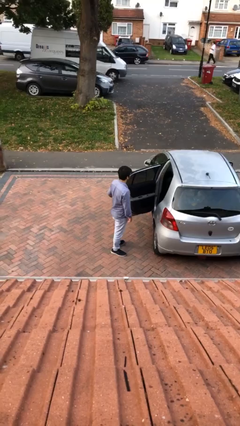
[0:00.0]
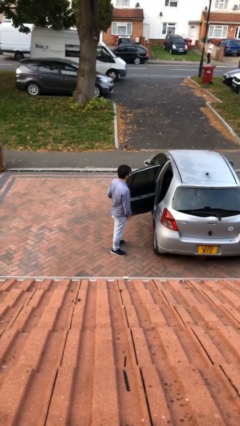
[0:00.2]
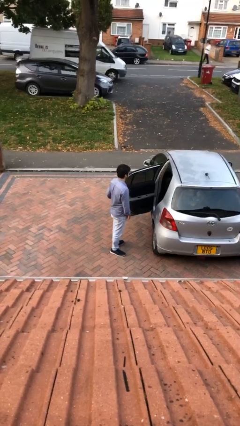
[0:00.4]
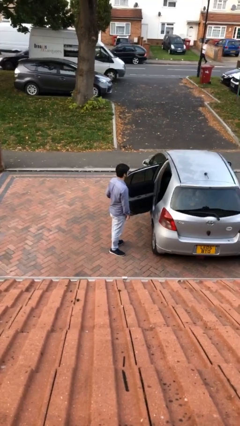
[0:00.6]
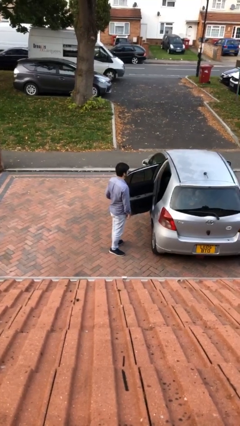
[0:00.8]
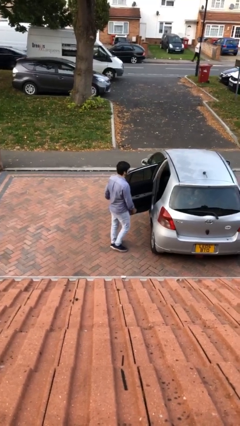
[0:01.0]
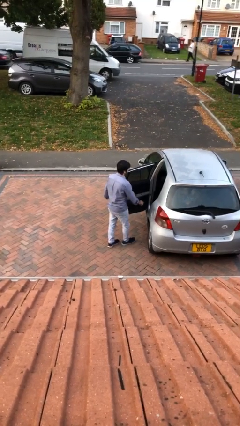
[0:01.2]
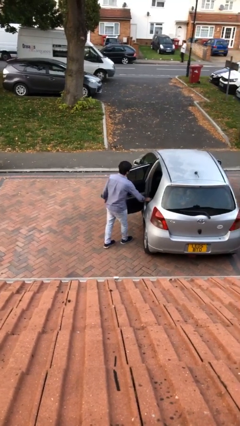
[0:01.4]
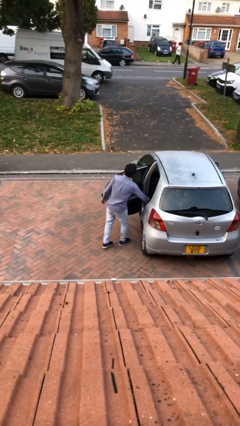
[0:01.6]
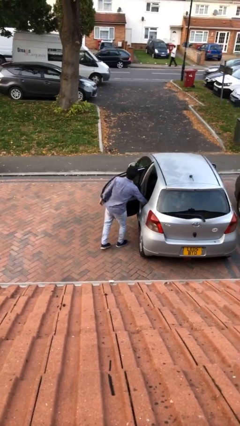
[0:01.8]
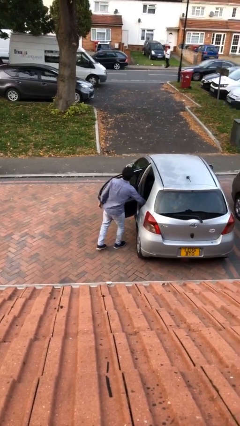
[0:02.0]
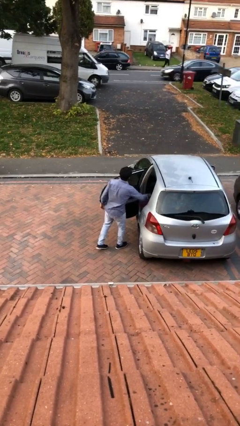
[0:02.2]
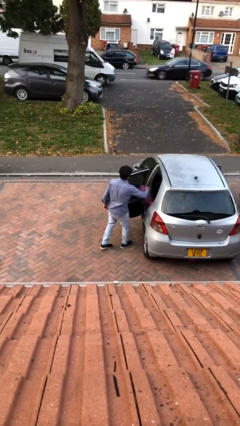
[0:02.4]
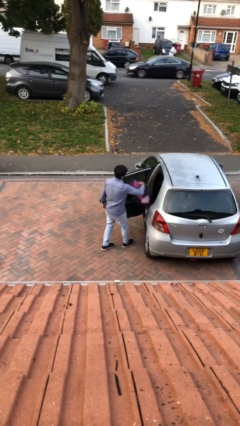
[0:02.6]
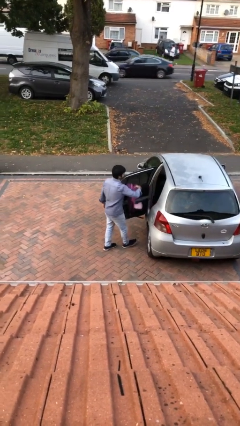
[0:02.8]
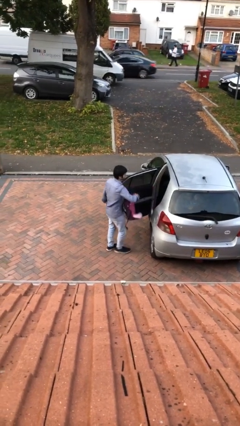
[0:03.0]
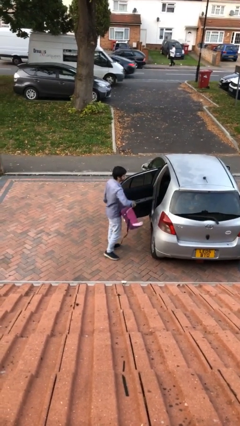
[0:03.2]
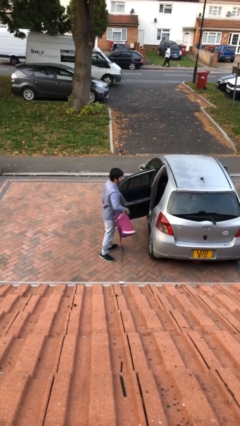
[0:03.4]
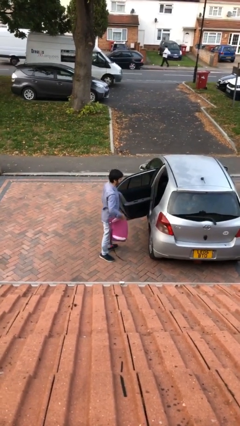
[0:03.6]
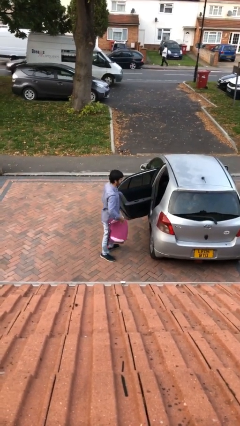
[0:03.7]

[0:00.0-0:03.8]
person unloads car

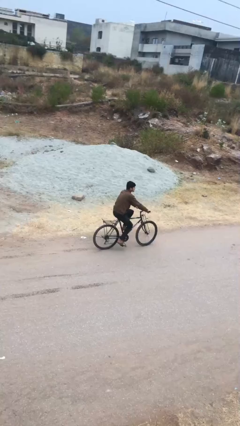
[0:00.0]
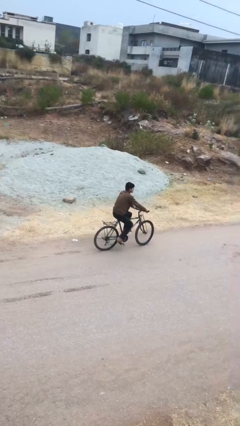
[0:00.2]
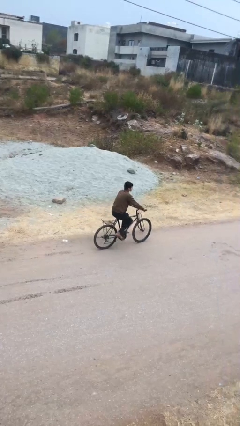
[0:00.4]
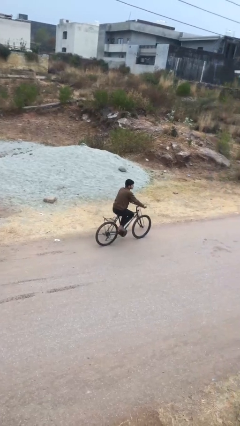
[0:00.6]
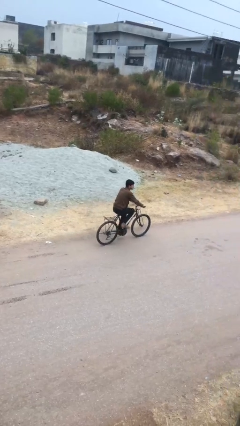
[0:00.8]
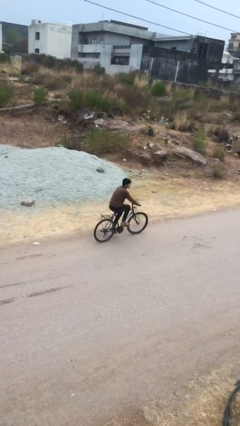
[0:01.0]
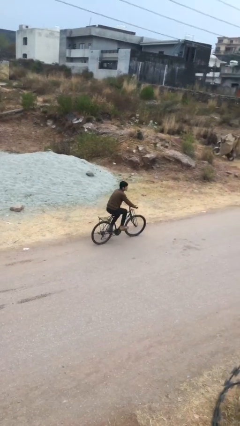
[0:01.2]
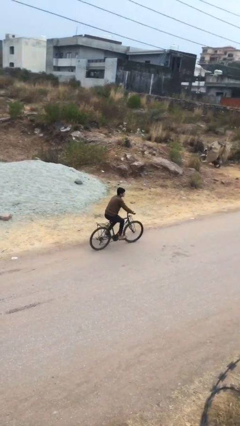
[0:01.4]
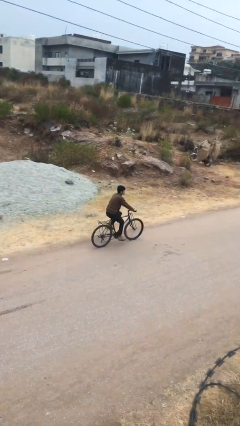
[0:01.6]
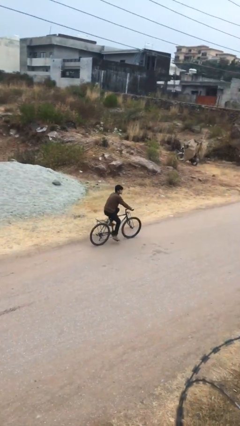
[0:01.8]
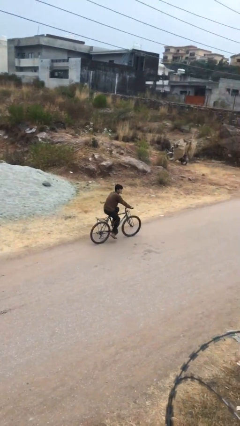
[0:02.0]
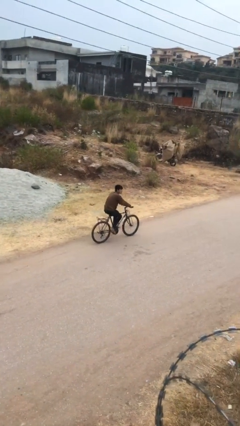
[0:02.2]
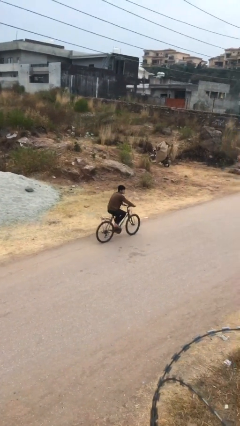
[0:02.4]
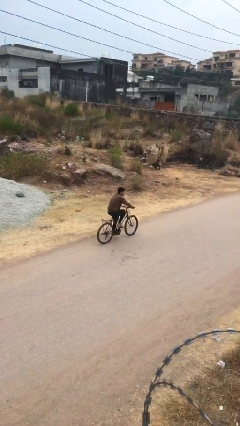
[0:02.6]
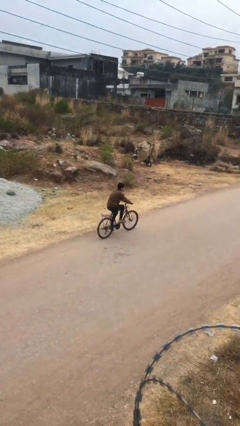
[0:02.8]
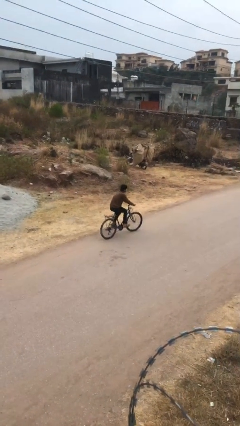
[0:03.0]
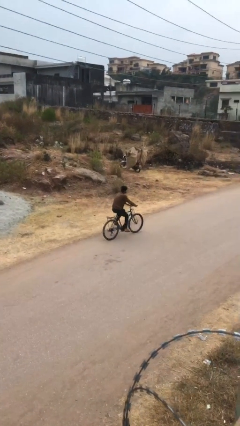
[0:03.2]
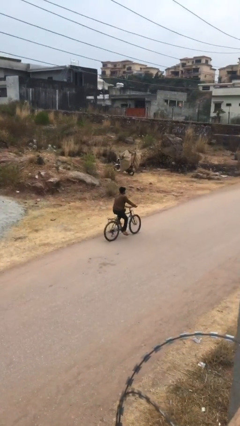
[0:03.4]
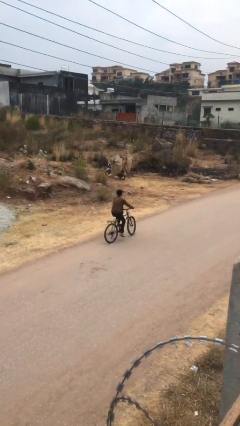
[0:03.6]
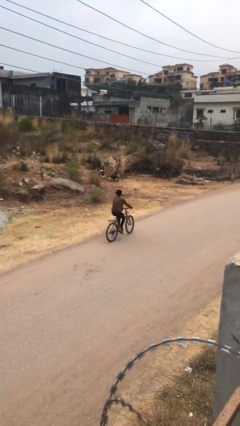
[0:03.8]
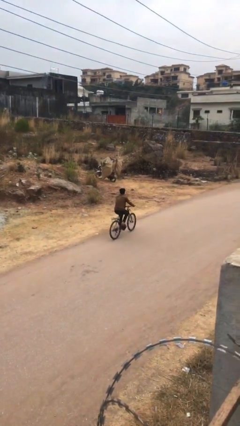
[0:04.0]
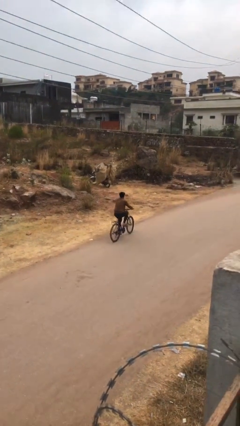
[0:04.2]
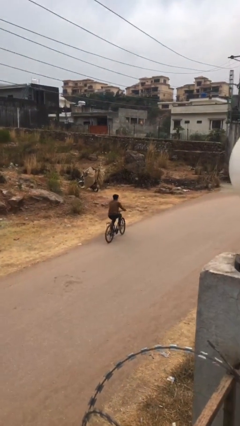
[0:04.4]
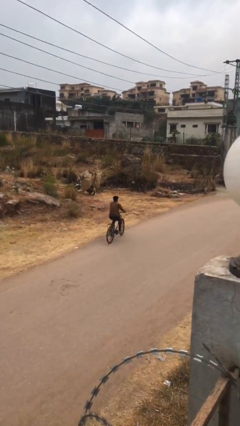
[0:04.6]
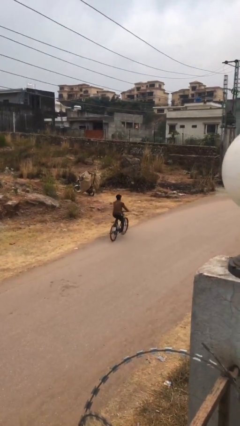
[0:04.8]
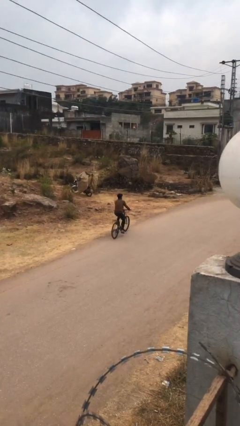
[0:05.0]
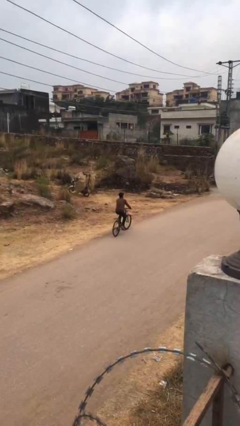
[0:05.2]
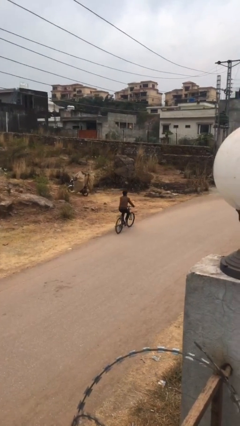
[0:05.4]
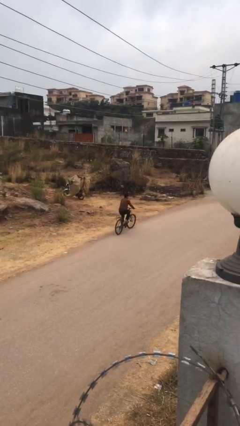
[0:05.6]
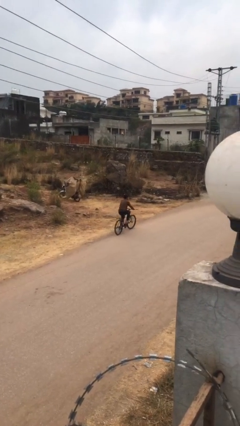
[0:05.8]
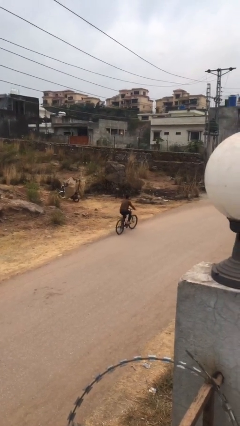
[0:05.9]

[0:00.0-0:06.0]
person rides bicycle

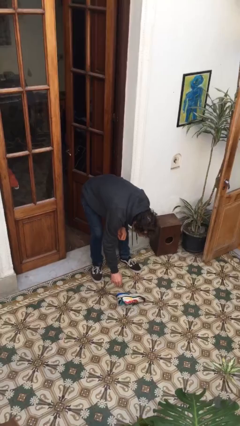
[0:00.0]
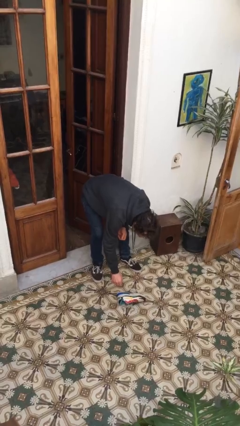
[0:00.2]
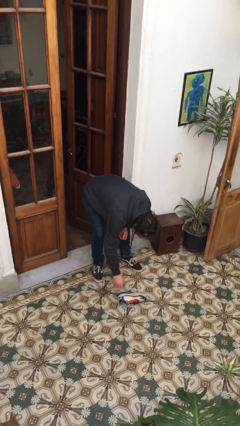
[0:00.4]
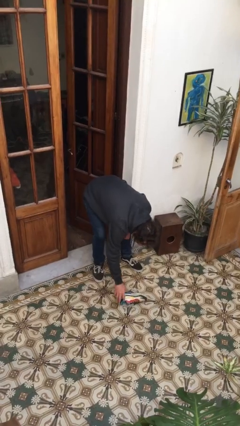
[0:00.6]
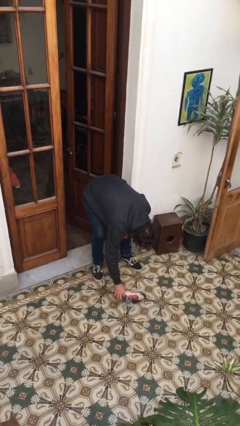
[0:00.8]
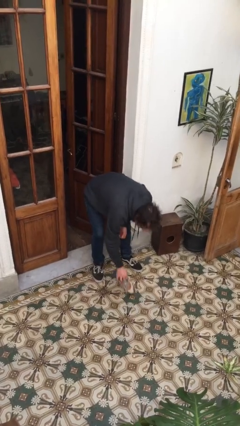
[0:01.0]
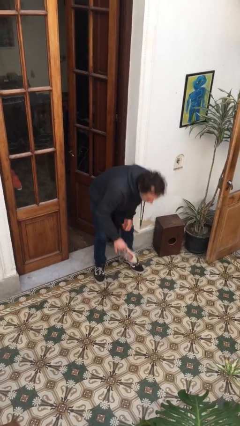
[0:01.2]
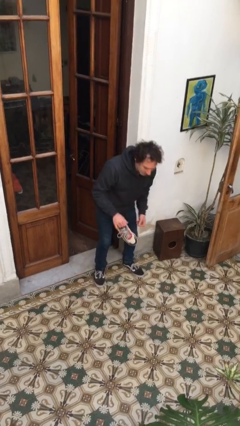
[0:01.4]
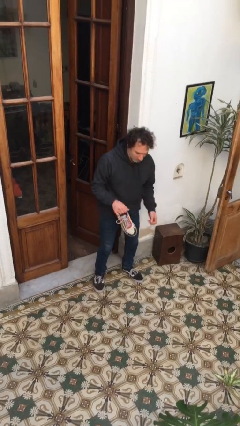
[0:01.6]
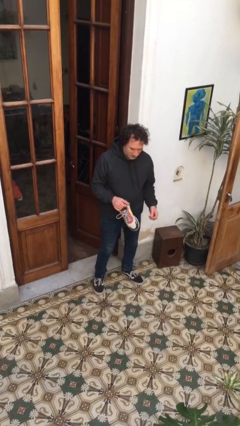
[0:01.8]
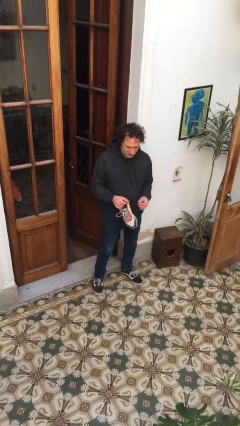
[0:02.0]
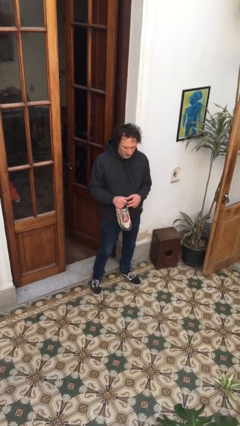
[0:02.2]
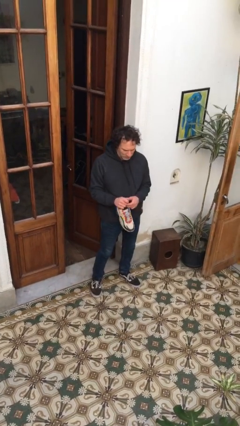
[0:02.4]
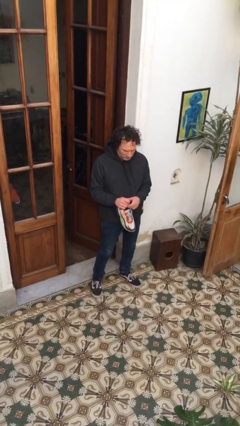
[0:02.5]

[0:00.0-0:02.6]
person picks up object from floor

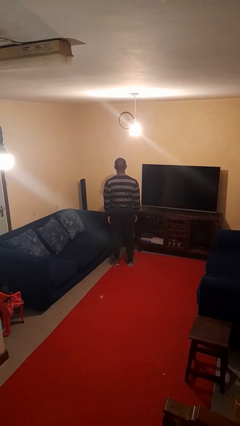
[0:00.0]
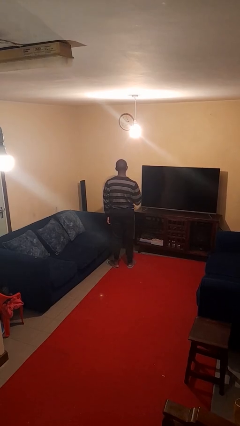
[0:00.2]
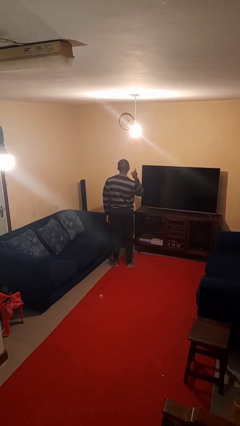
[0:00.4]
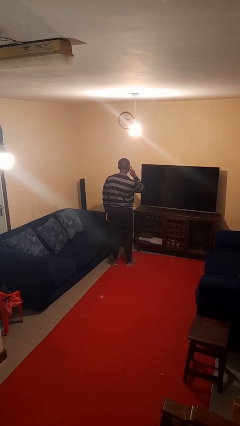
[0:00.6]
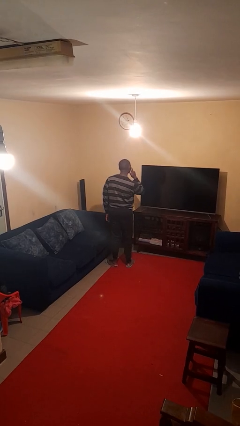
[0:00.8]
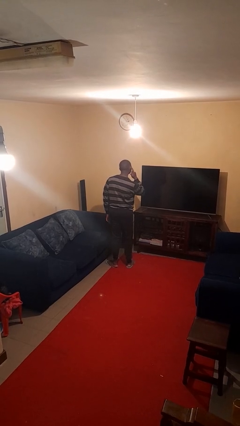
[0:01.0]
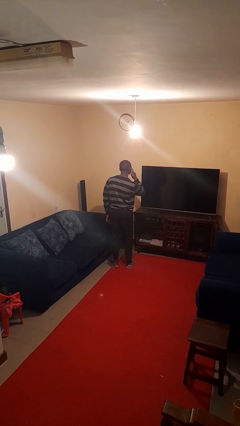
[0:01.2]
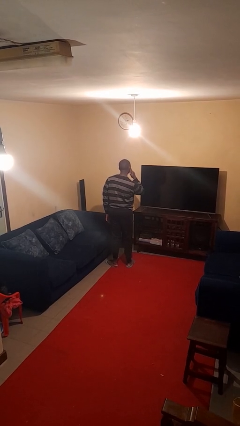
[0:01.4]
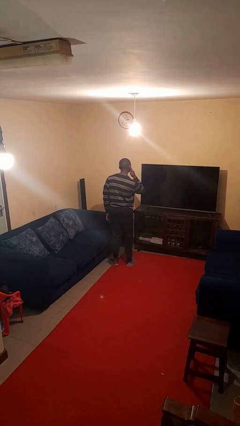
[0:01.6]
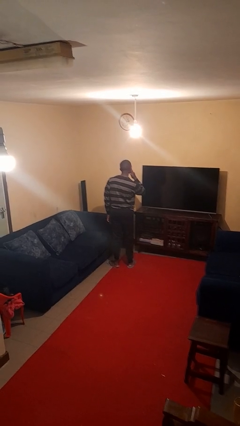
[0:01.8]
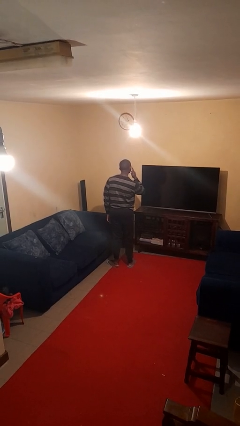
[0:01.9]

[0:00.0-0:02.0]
person gestures listen closely

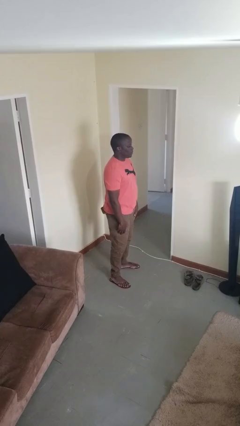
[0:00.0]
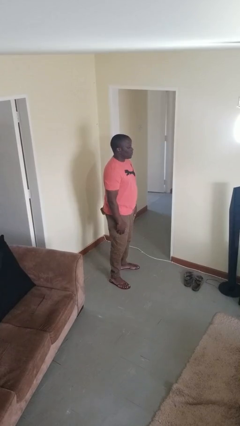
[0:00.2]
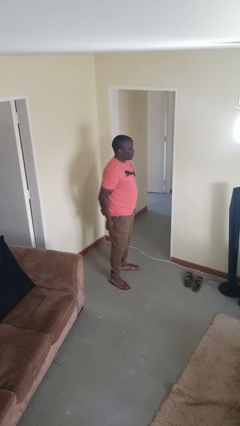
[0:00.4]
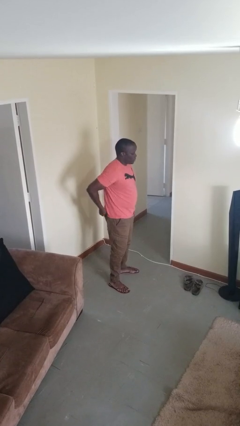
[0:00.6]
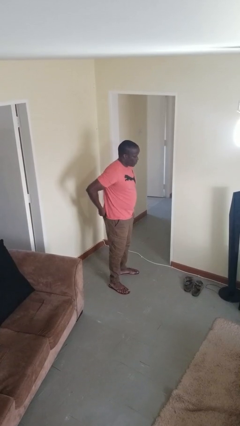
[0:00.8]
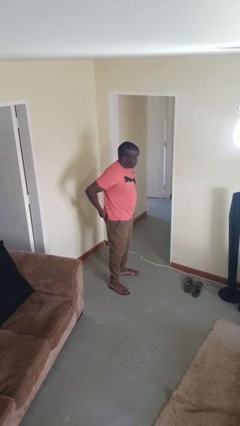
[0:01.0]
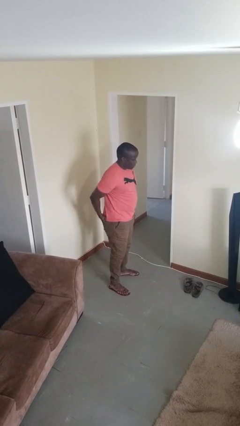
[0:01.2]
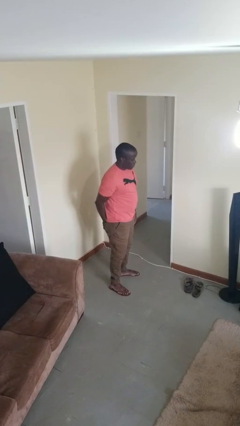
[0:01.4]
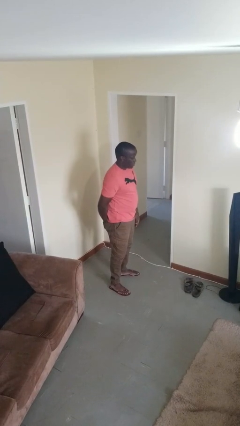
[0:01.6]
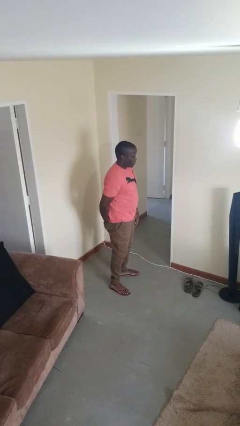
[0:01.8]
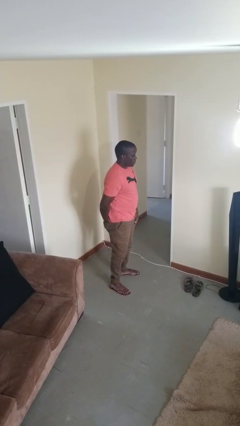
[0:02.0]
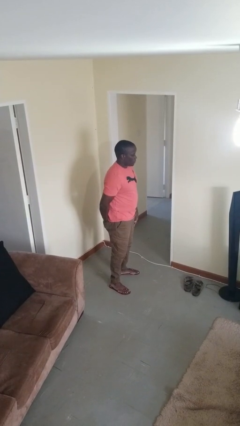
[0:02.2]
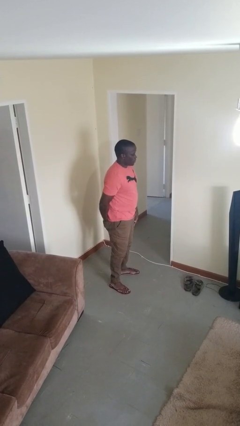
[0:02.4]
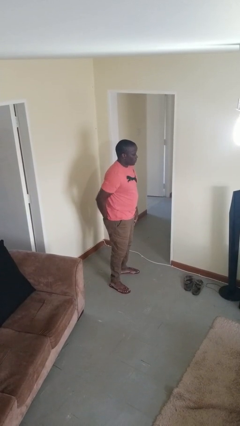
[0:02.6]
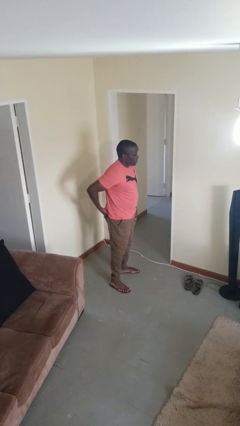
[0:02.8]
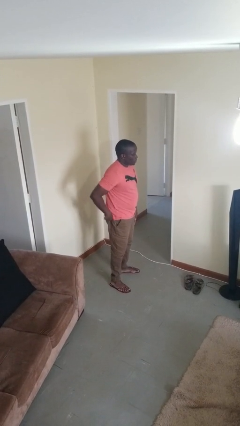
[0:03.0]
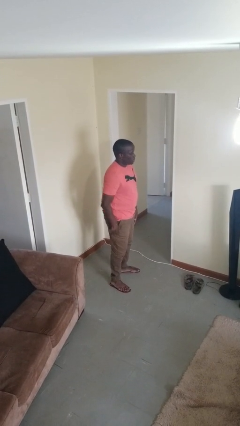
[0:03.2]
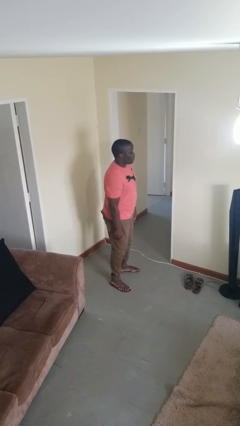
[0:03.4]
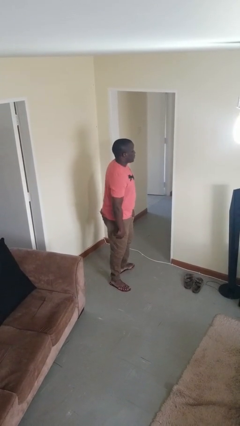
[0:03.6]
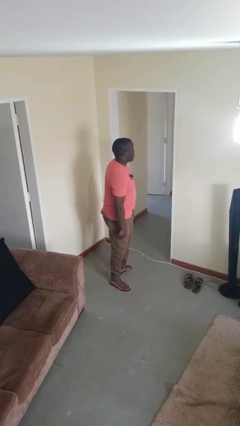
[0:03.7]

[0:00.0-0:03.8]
person puts hands in back pockets
